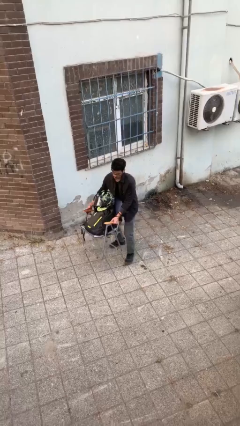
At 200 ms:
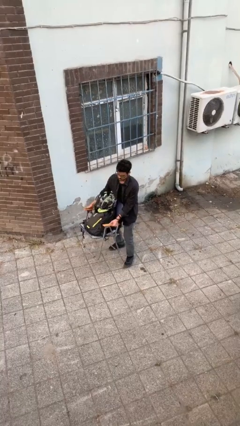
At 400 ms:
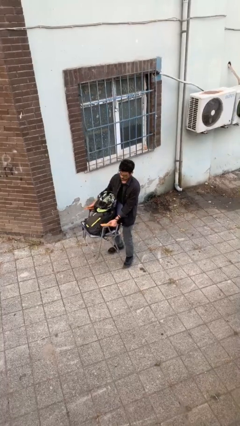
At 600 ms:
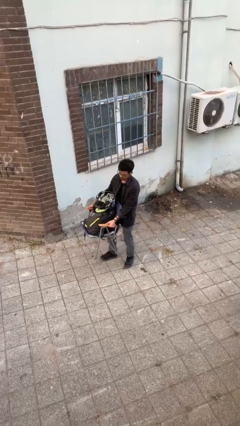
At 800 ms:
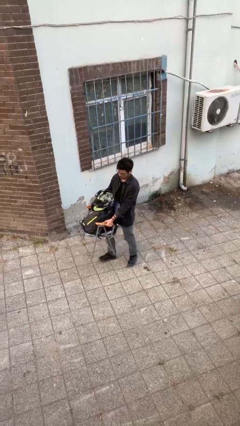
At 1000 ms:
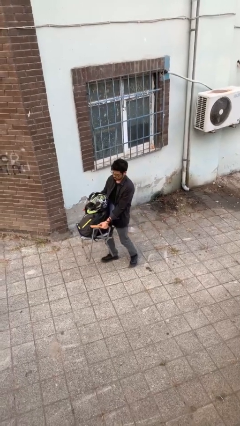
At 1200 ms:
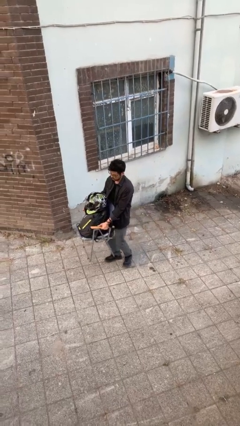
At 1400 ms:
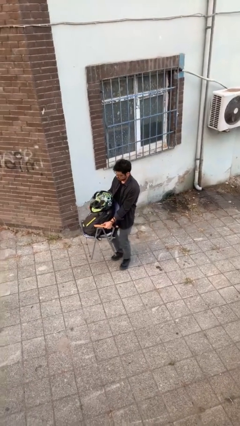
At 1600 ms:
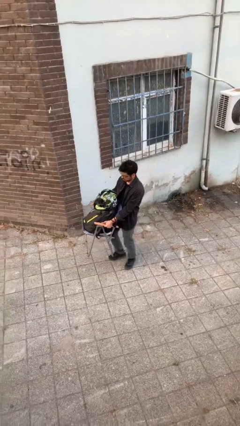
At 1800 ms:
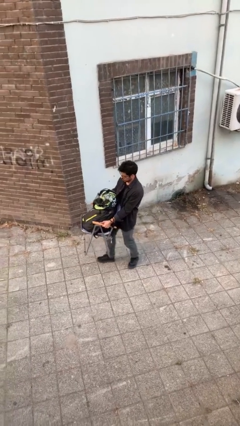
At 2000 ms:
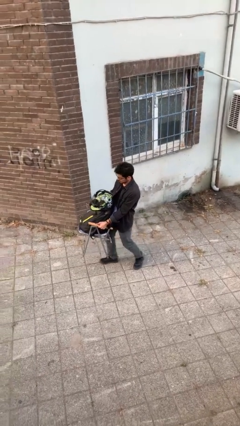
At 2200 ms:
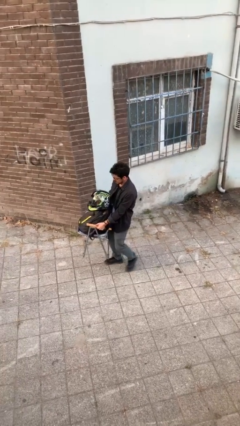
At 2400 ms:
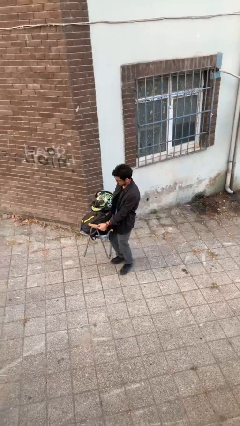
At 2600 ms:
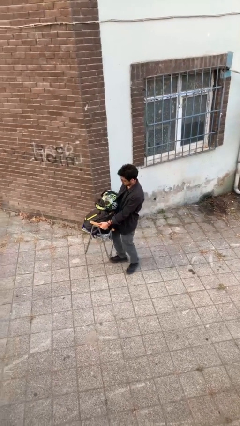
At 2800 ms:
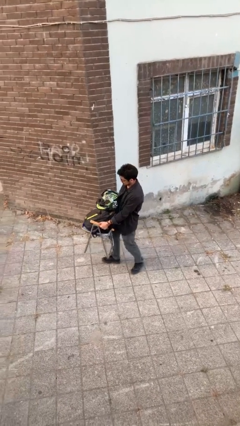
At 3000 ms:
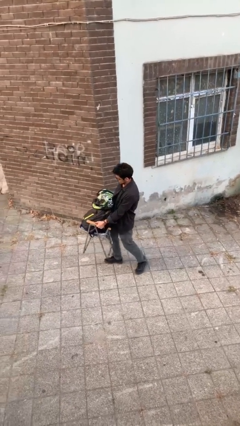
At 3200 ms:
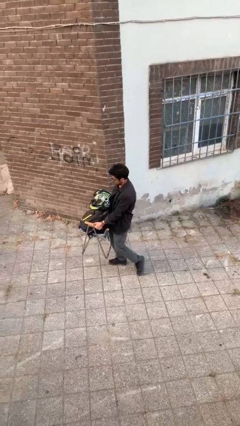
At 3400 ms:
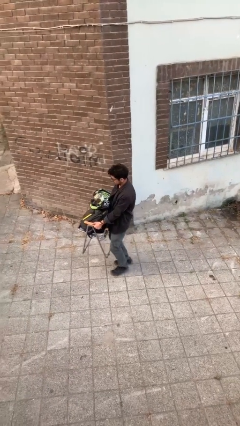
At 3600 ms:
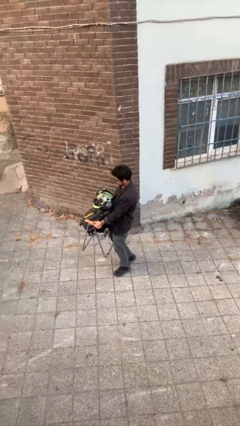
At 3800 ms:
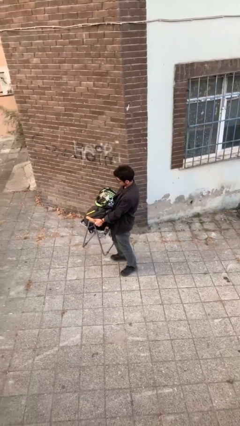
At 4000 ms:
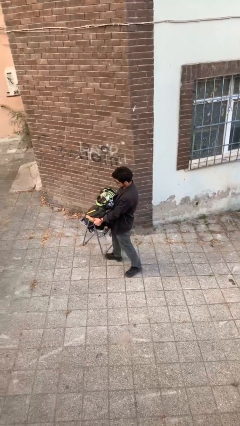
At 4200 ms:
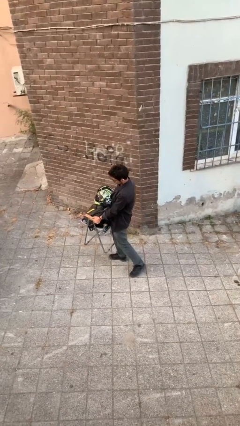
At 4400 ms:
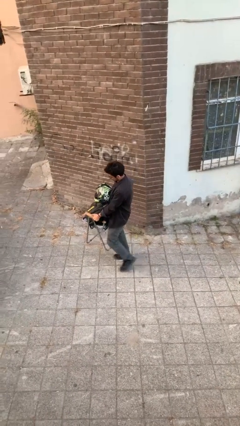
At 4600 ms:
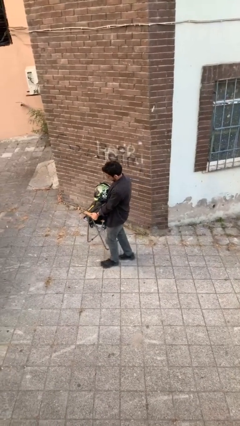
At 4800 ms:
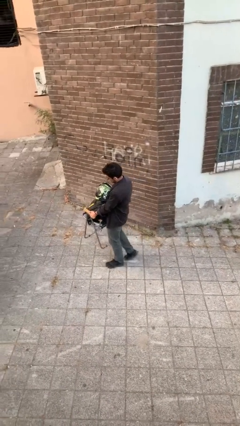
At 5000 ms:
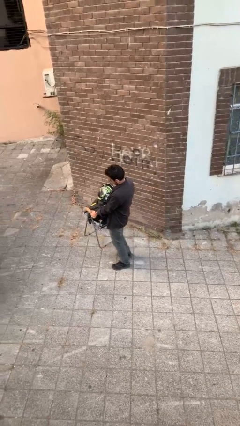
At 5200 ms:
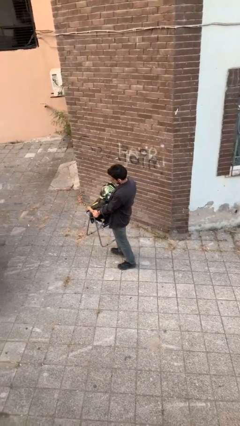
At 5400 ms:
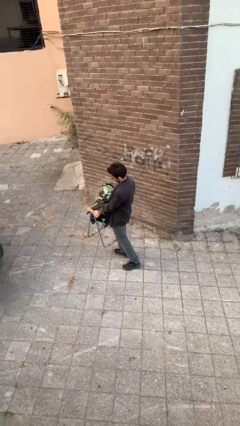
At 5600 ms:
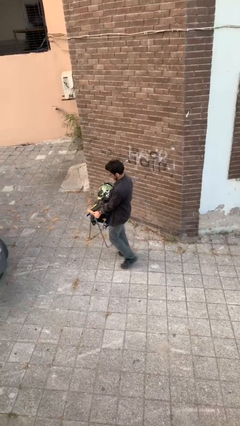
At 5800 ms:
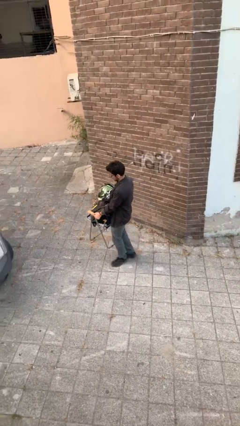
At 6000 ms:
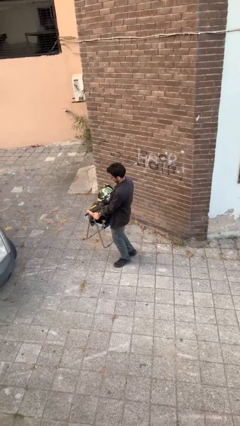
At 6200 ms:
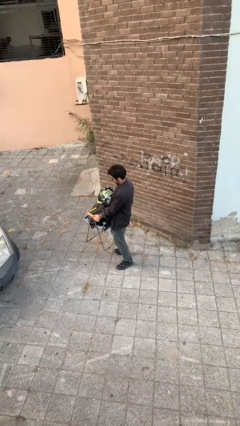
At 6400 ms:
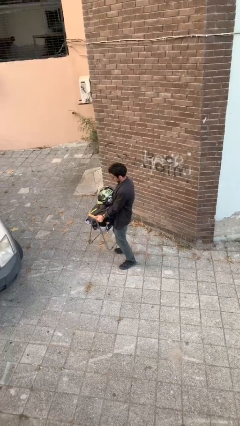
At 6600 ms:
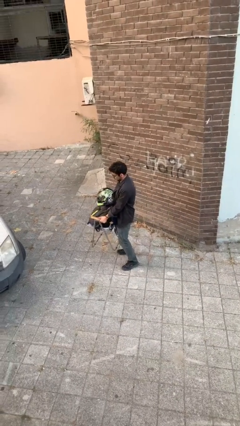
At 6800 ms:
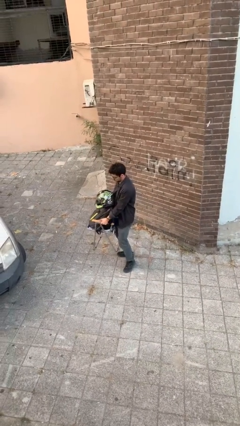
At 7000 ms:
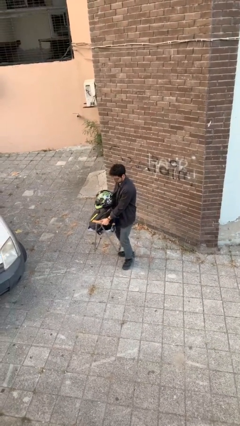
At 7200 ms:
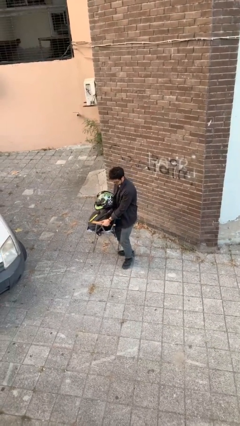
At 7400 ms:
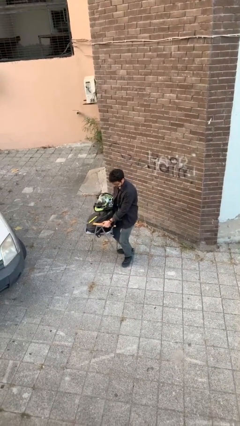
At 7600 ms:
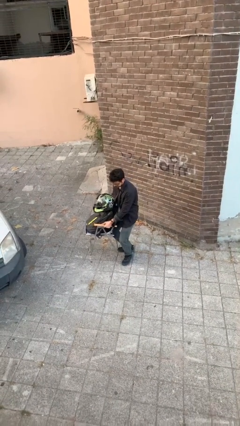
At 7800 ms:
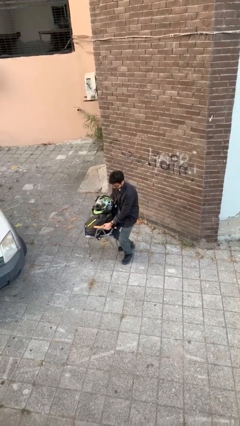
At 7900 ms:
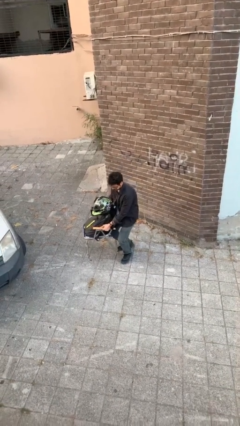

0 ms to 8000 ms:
person carries heavy object

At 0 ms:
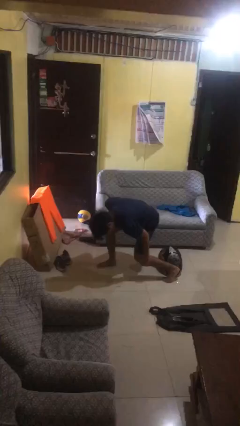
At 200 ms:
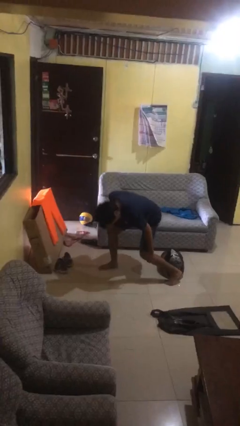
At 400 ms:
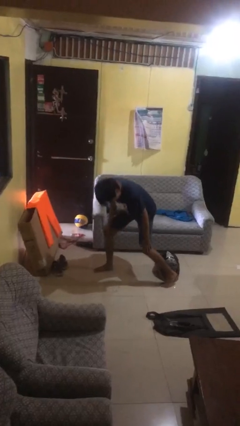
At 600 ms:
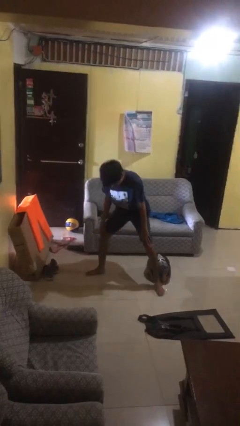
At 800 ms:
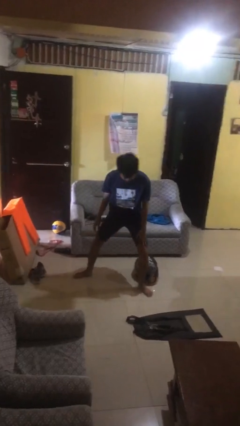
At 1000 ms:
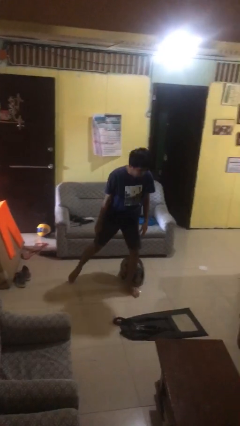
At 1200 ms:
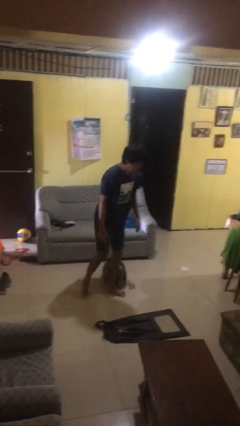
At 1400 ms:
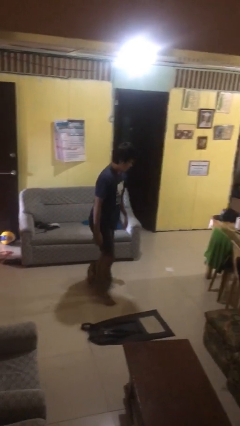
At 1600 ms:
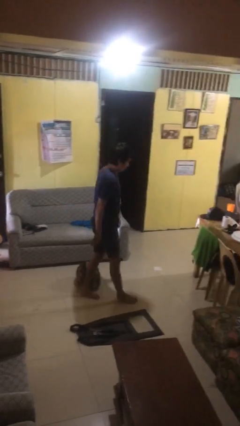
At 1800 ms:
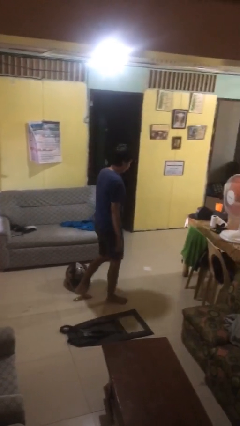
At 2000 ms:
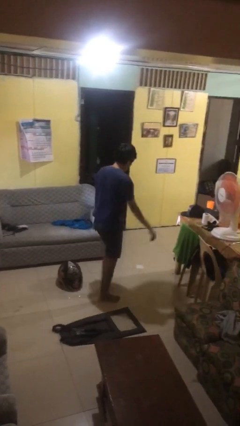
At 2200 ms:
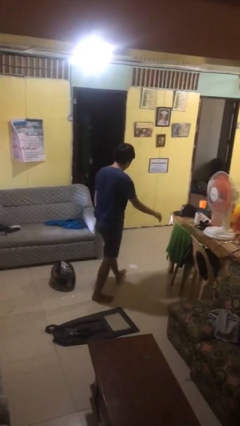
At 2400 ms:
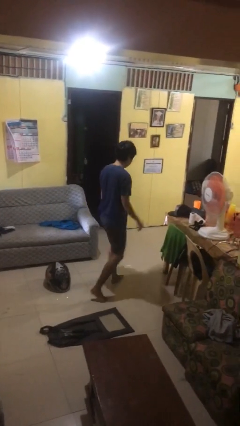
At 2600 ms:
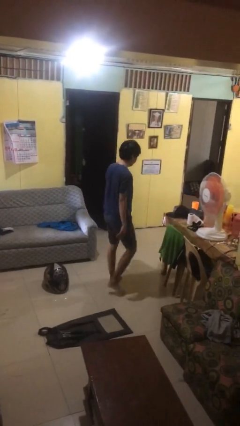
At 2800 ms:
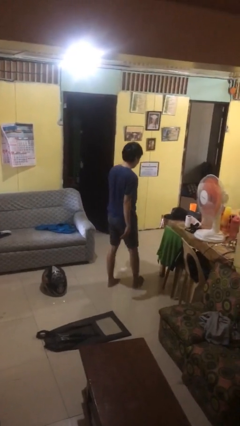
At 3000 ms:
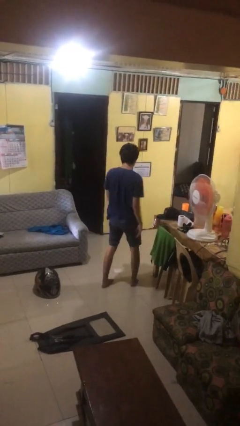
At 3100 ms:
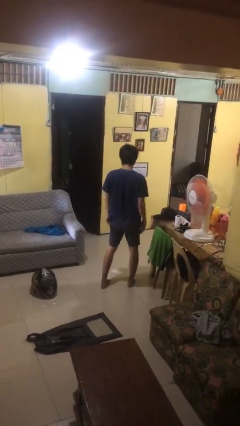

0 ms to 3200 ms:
person stands up from floor

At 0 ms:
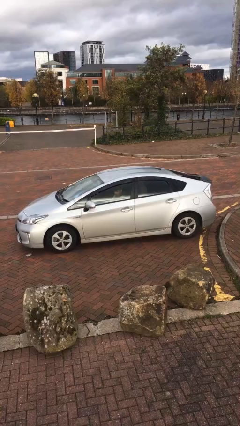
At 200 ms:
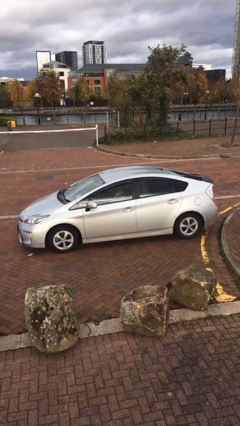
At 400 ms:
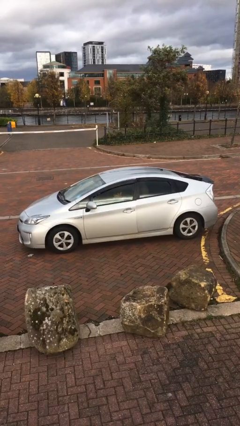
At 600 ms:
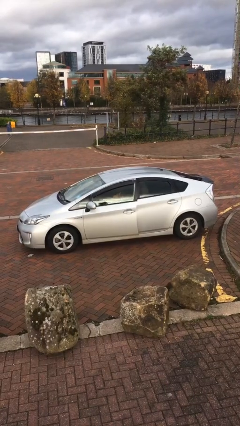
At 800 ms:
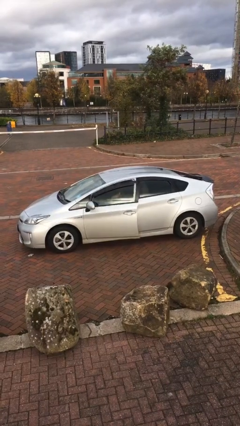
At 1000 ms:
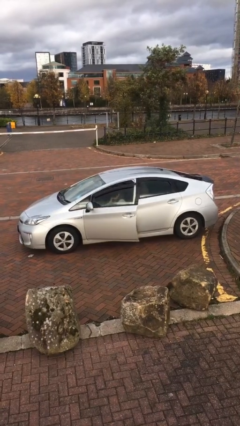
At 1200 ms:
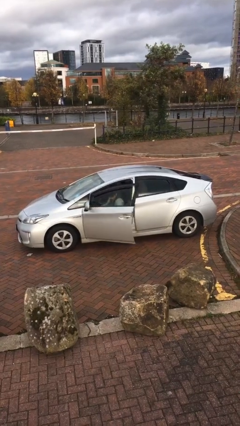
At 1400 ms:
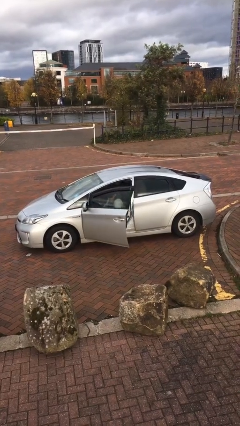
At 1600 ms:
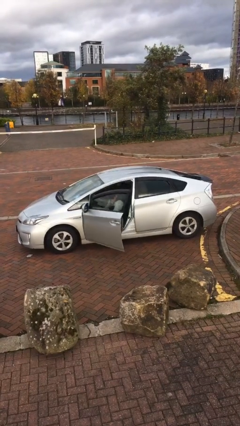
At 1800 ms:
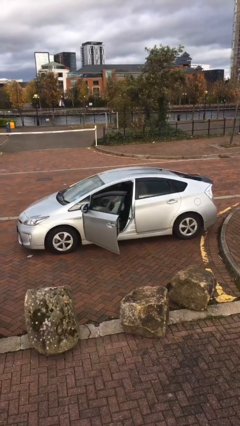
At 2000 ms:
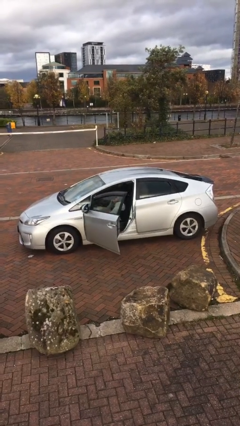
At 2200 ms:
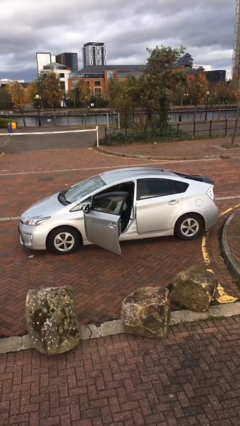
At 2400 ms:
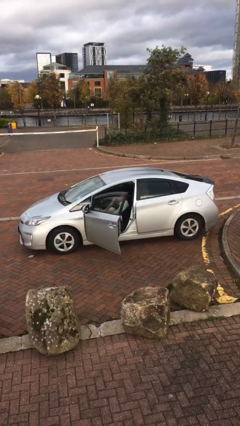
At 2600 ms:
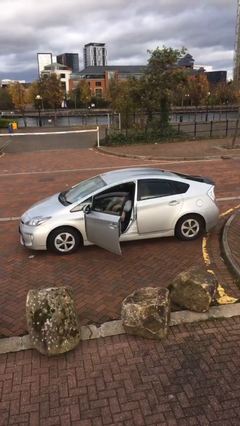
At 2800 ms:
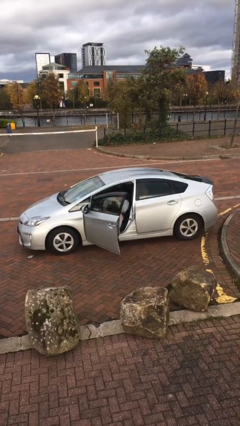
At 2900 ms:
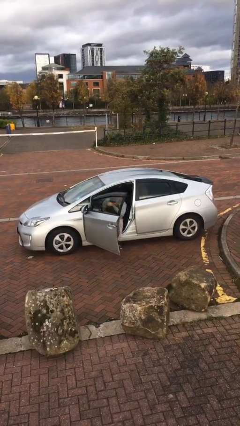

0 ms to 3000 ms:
person opens car door

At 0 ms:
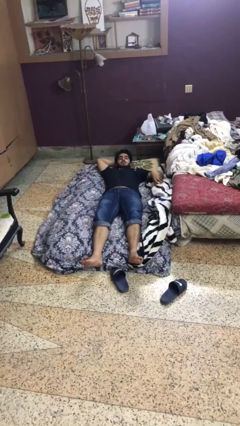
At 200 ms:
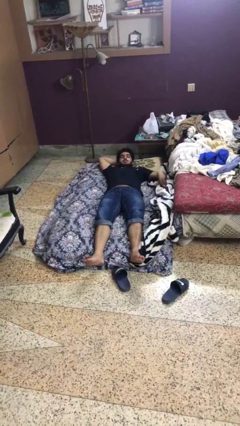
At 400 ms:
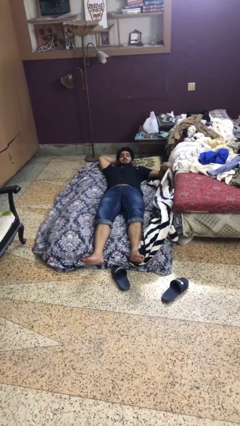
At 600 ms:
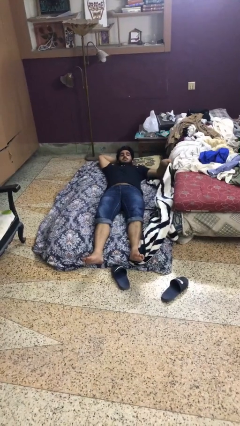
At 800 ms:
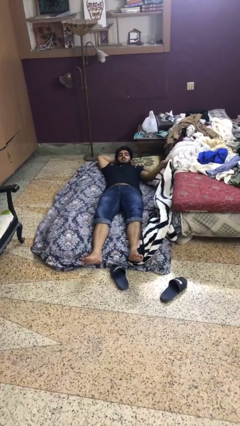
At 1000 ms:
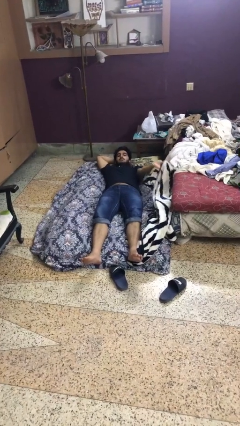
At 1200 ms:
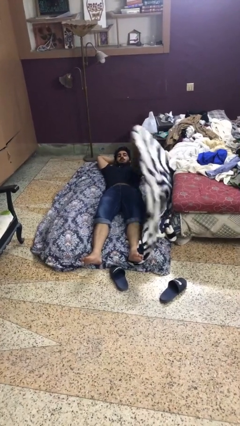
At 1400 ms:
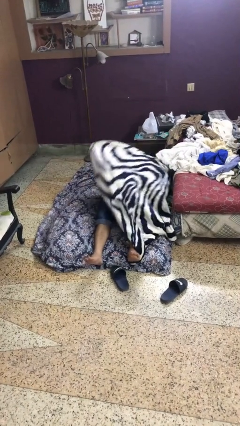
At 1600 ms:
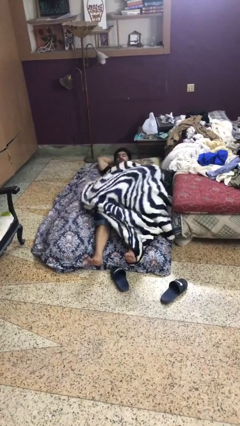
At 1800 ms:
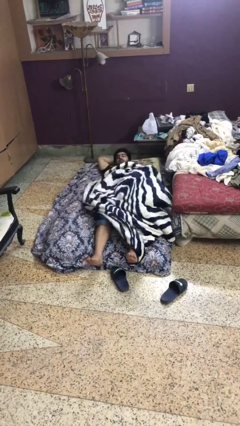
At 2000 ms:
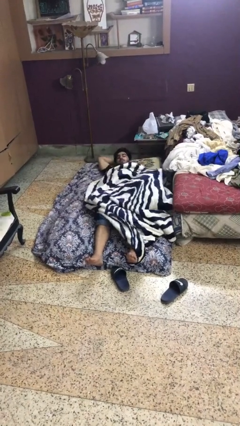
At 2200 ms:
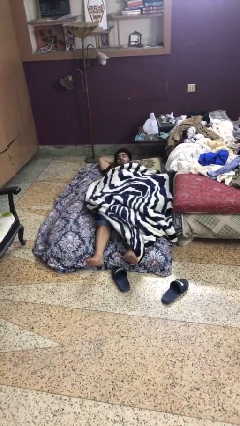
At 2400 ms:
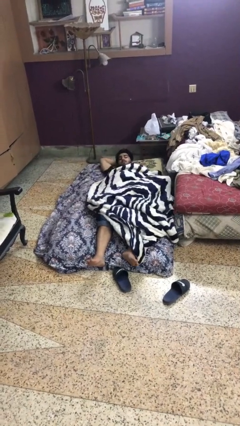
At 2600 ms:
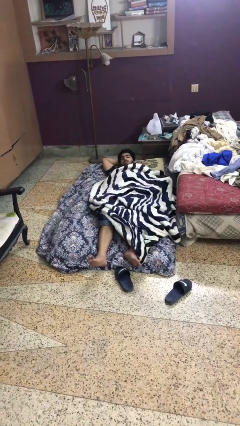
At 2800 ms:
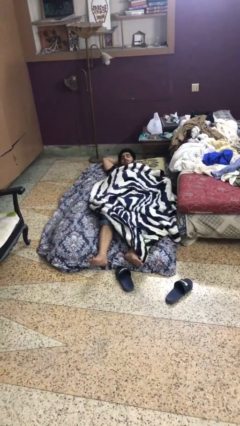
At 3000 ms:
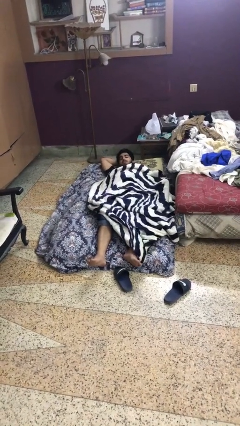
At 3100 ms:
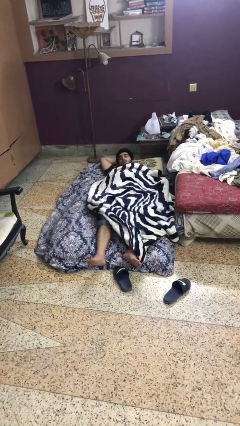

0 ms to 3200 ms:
person covers with blanket

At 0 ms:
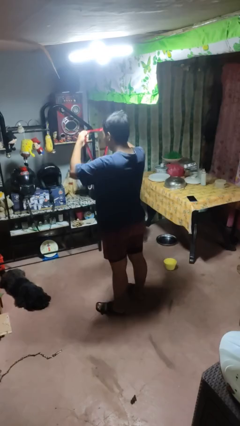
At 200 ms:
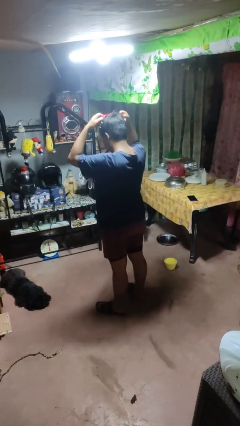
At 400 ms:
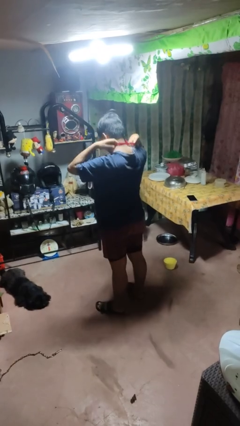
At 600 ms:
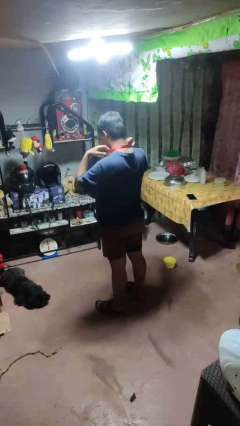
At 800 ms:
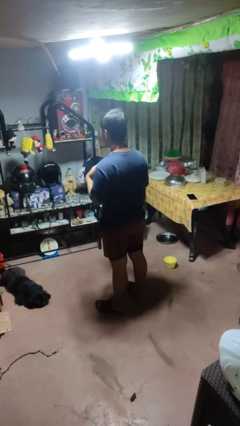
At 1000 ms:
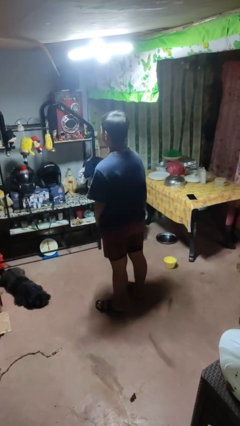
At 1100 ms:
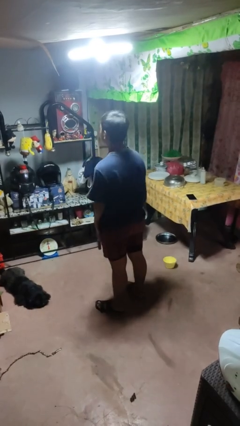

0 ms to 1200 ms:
person puts on necklace
